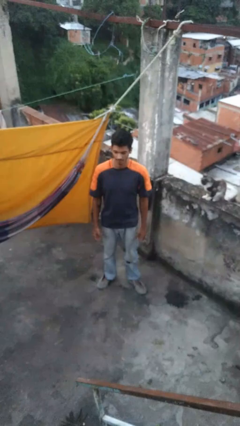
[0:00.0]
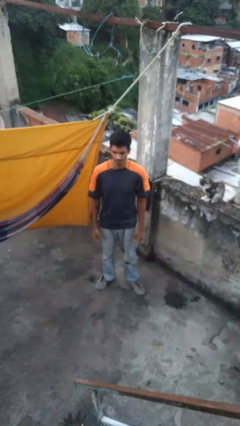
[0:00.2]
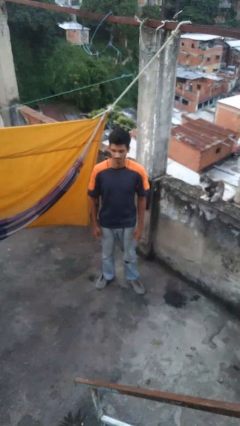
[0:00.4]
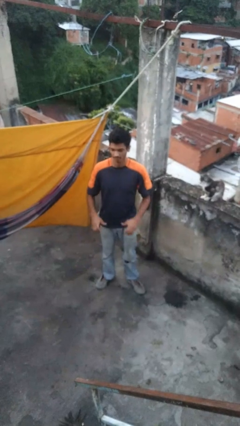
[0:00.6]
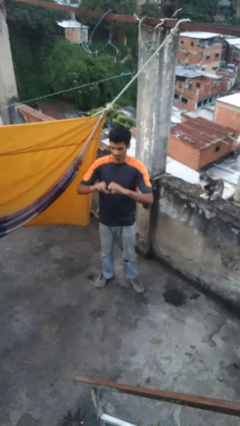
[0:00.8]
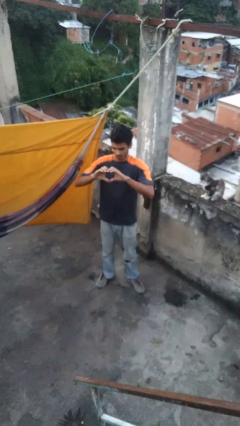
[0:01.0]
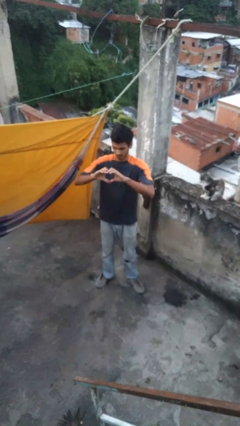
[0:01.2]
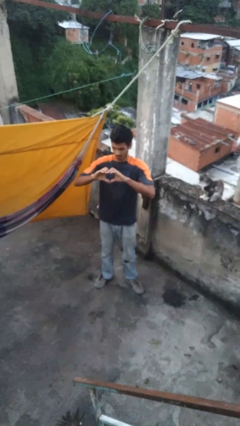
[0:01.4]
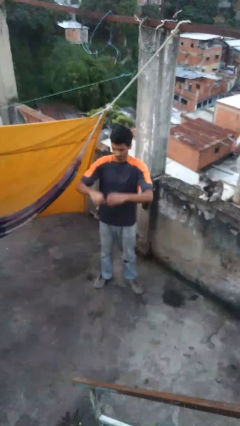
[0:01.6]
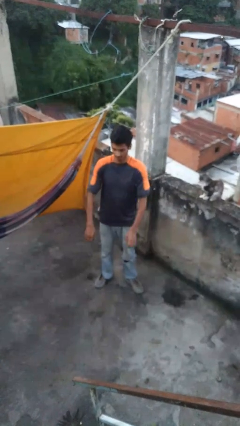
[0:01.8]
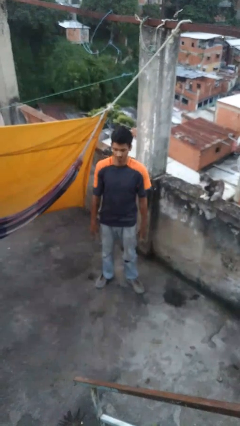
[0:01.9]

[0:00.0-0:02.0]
person gestures heart

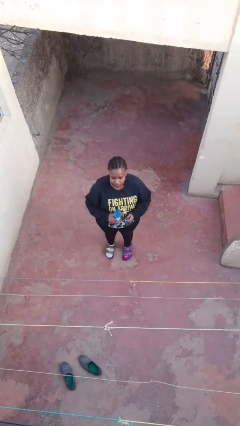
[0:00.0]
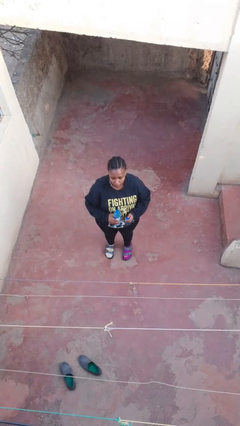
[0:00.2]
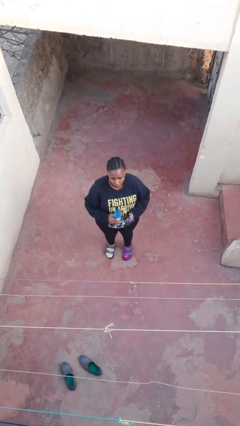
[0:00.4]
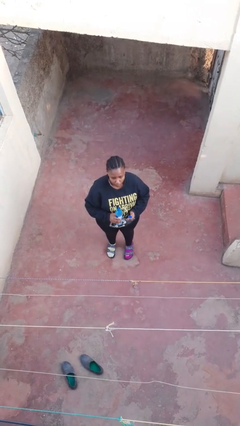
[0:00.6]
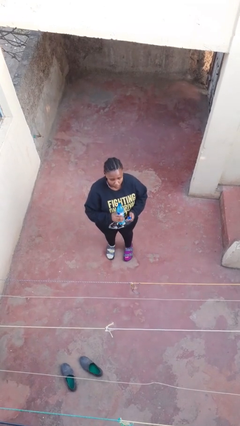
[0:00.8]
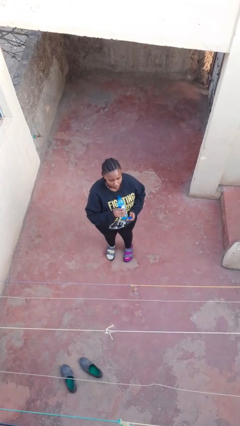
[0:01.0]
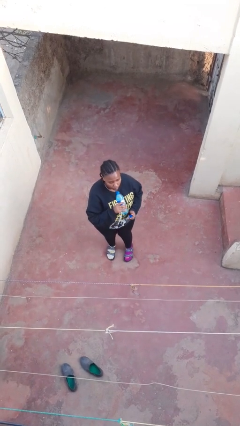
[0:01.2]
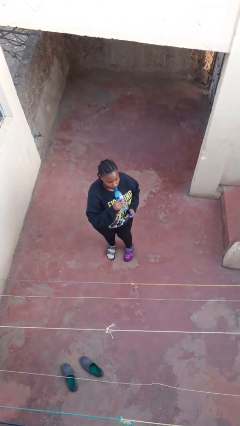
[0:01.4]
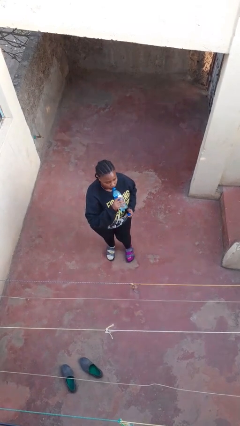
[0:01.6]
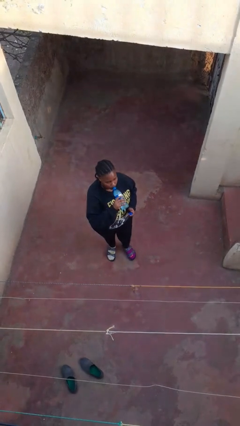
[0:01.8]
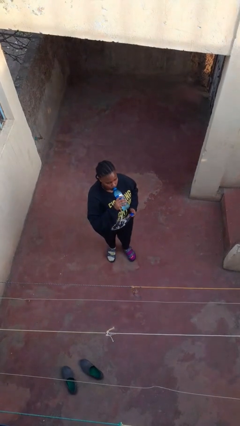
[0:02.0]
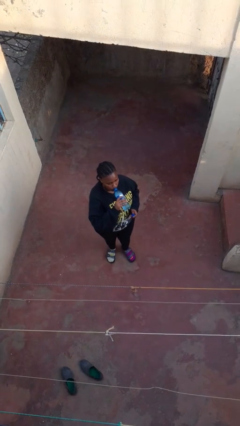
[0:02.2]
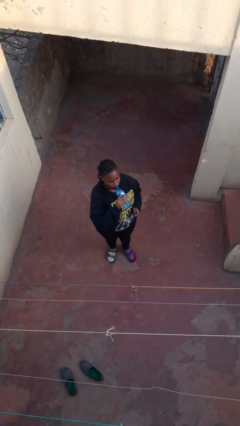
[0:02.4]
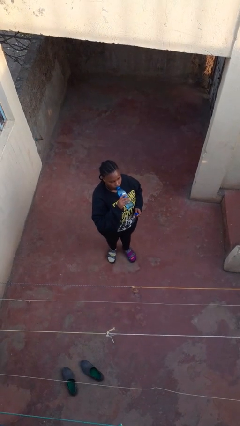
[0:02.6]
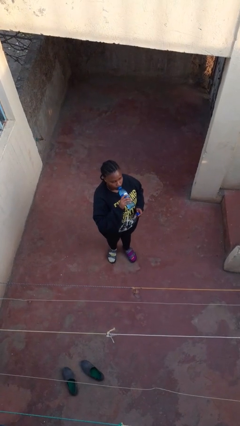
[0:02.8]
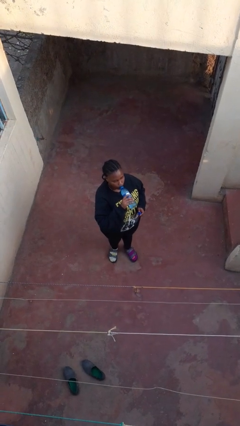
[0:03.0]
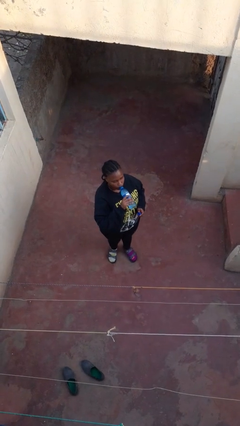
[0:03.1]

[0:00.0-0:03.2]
person drinks from bottle

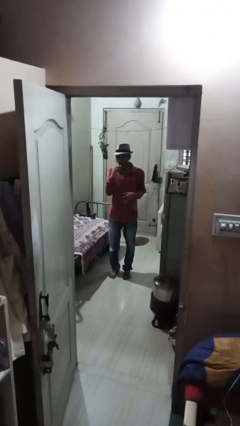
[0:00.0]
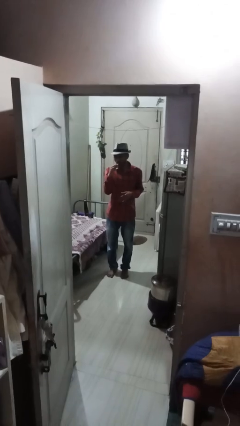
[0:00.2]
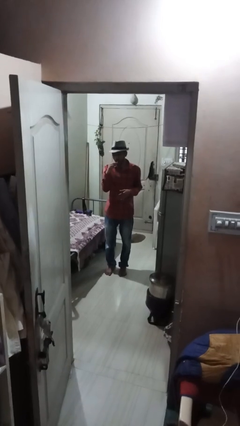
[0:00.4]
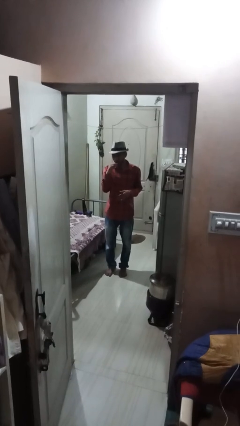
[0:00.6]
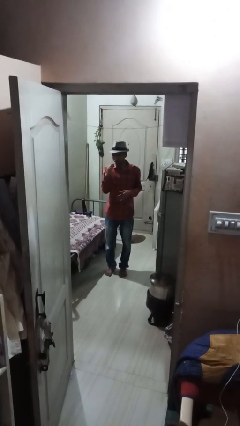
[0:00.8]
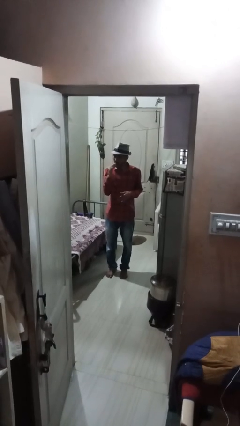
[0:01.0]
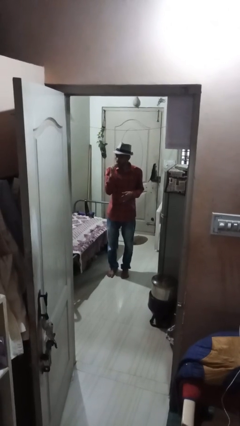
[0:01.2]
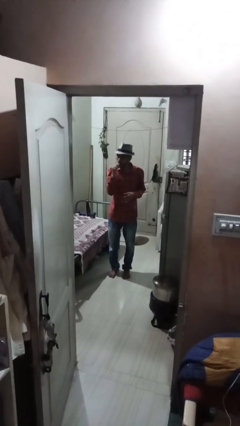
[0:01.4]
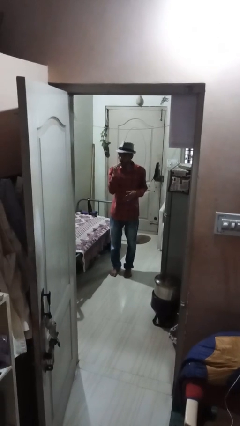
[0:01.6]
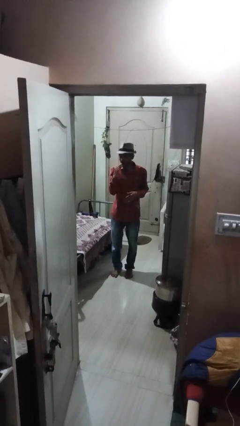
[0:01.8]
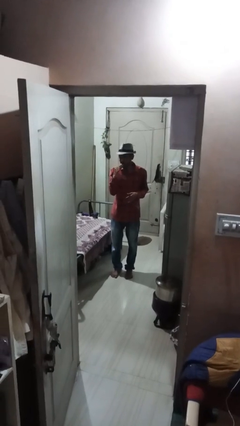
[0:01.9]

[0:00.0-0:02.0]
person brushes teeth

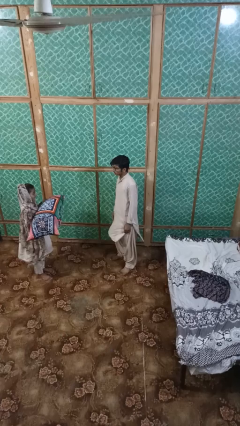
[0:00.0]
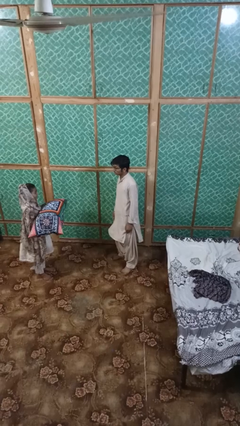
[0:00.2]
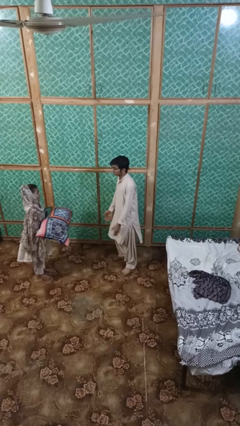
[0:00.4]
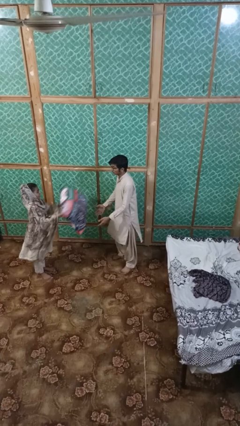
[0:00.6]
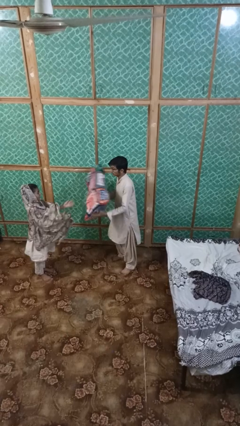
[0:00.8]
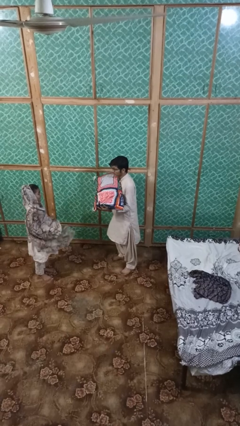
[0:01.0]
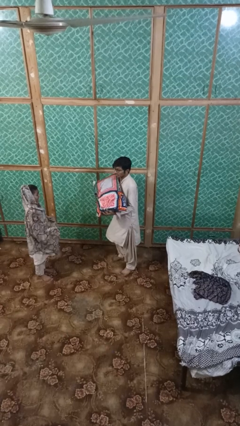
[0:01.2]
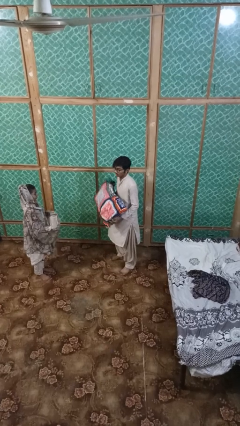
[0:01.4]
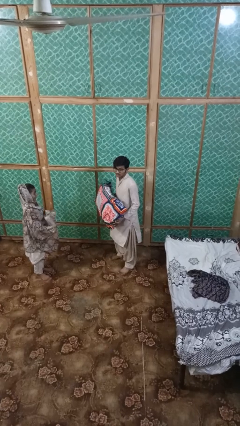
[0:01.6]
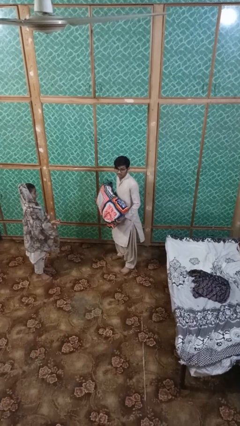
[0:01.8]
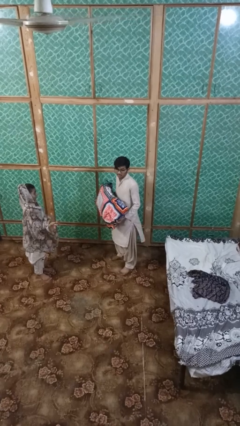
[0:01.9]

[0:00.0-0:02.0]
person catches object from person

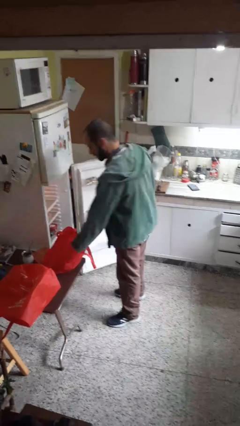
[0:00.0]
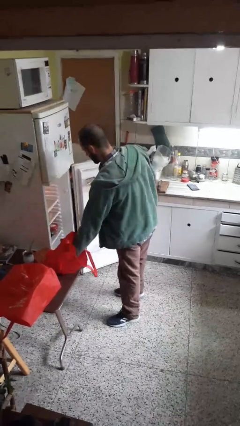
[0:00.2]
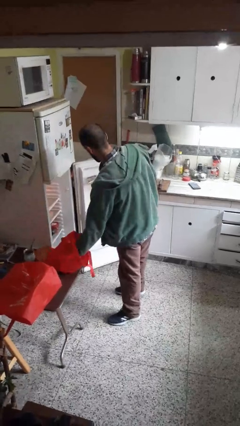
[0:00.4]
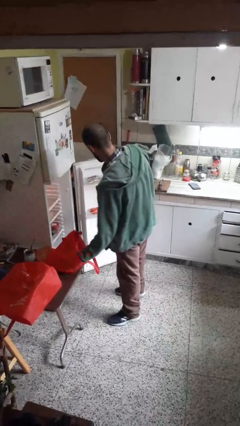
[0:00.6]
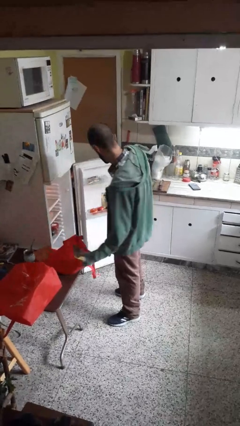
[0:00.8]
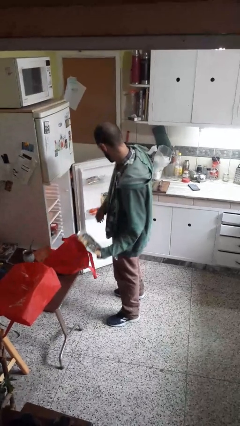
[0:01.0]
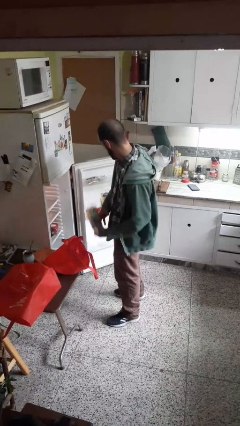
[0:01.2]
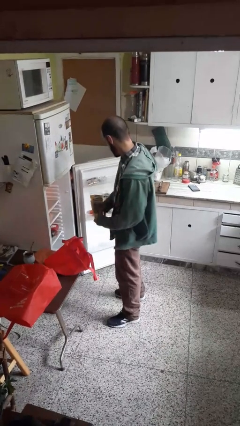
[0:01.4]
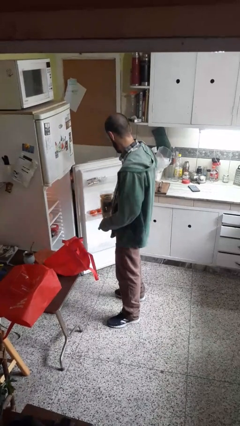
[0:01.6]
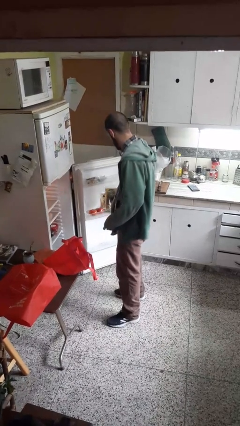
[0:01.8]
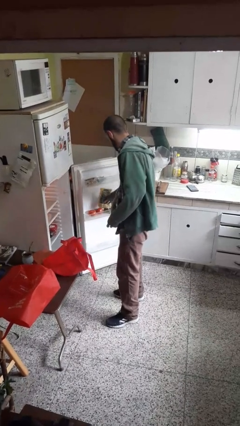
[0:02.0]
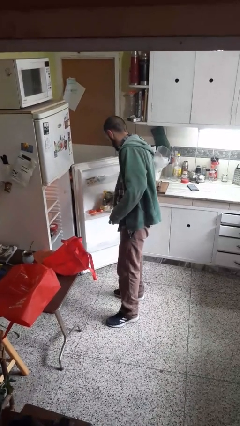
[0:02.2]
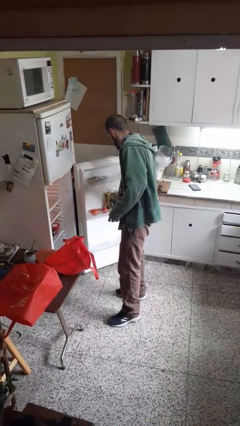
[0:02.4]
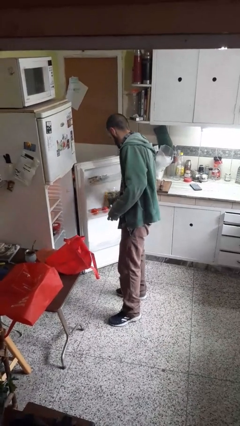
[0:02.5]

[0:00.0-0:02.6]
person loads groceries into refrigerator

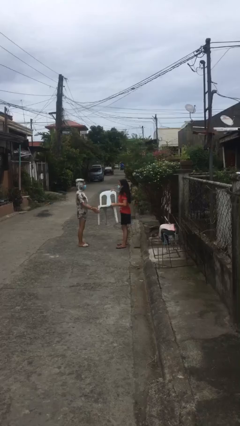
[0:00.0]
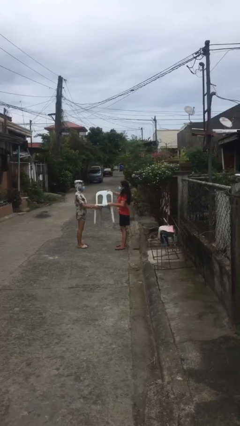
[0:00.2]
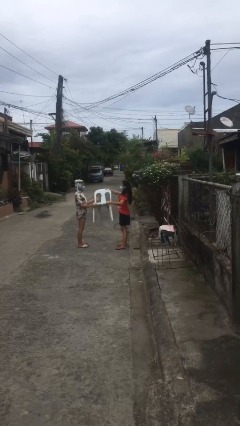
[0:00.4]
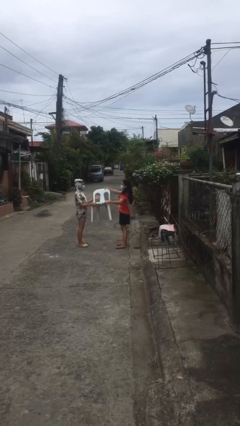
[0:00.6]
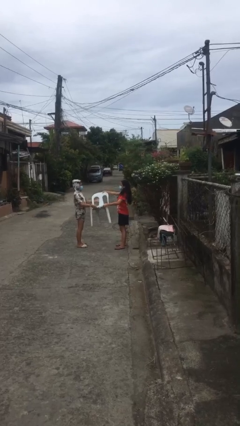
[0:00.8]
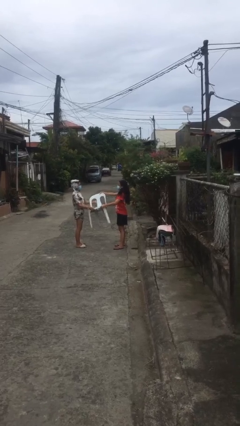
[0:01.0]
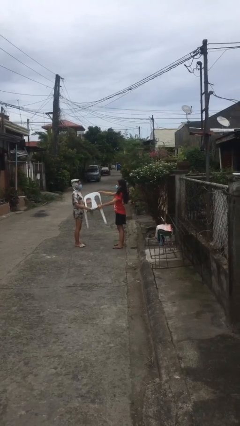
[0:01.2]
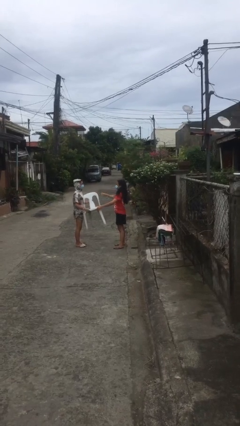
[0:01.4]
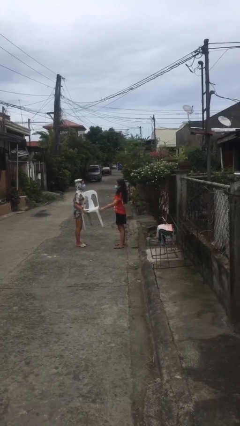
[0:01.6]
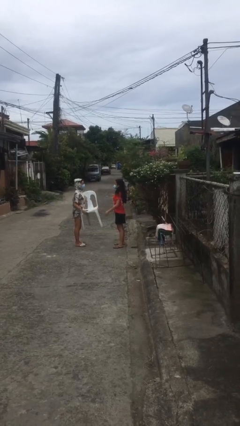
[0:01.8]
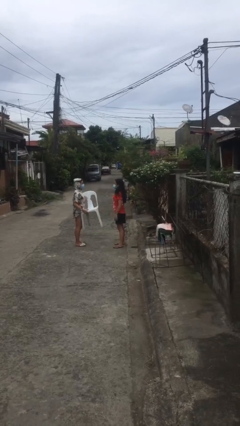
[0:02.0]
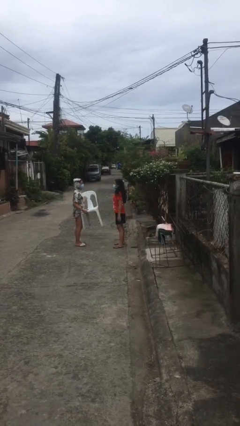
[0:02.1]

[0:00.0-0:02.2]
person transfers object to person

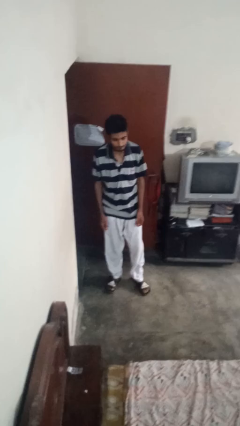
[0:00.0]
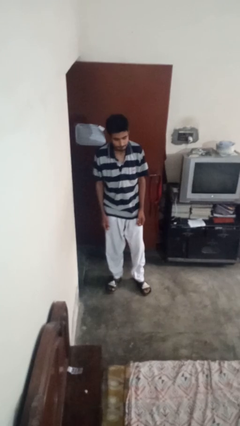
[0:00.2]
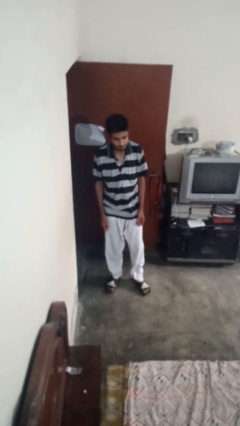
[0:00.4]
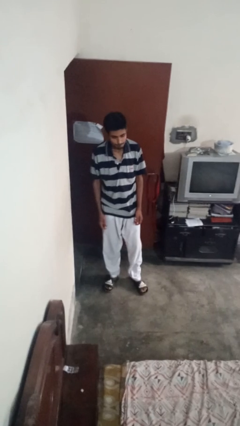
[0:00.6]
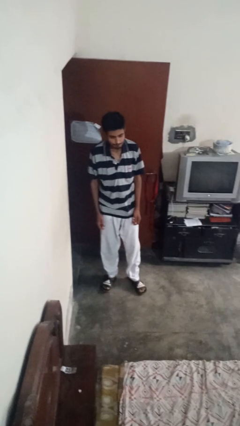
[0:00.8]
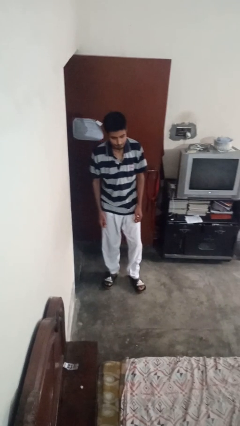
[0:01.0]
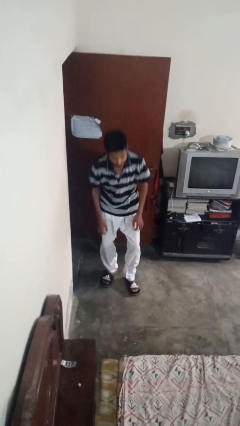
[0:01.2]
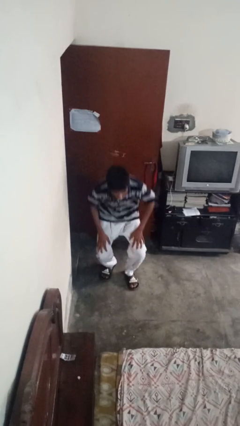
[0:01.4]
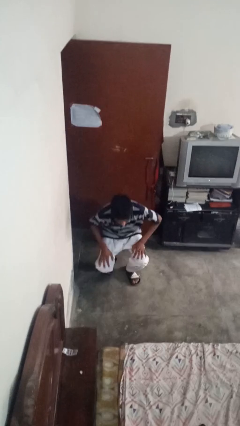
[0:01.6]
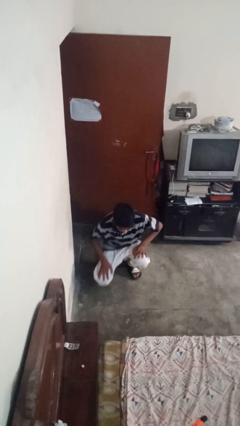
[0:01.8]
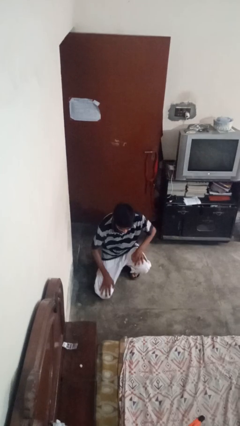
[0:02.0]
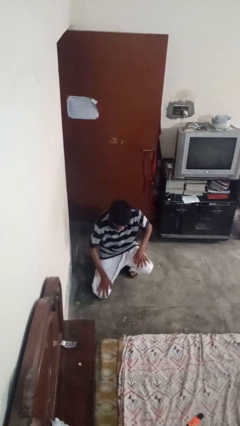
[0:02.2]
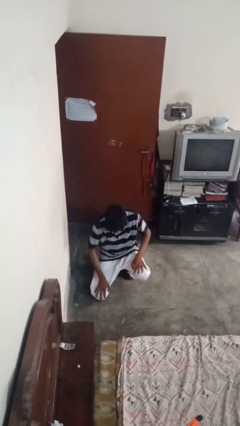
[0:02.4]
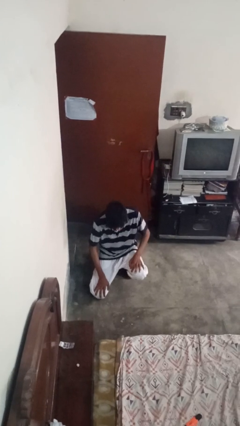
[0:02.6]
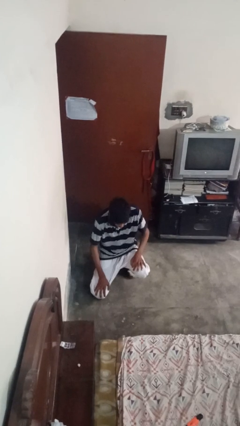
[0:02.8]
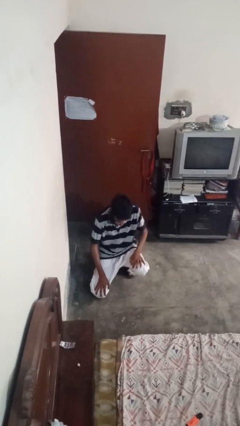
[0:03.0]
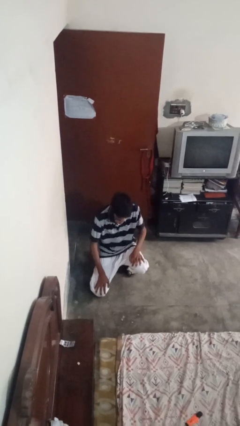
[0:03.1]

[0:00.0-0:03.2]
person kneels
